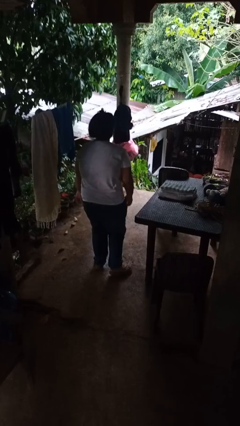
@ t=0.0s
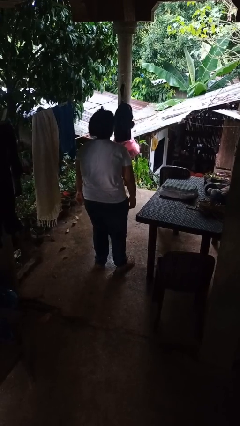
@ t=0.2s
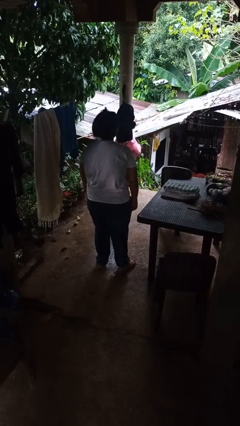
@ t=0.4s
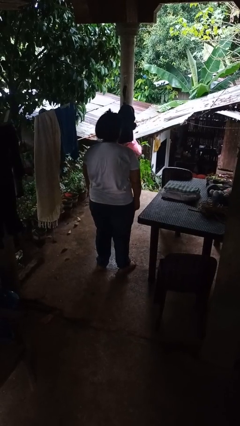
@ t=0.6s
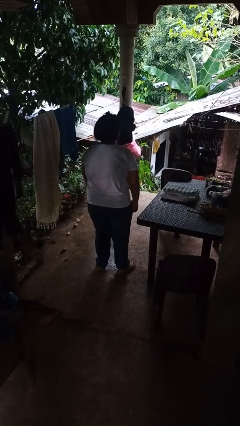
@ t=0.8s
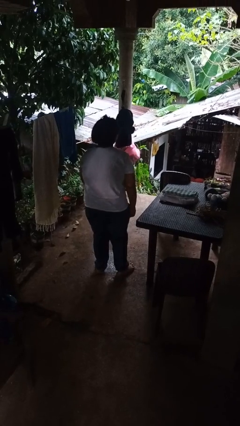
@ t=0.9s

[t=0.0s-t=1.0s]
person bumps into table

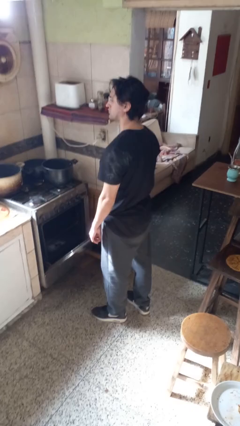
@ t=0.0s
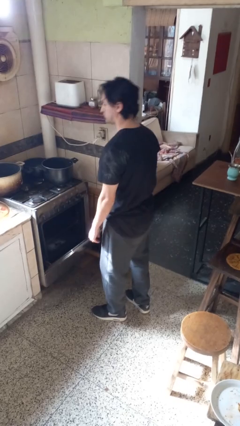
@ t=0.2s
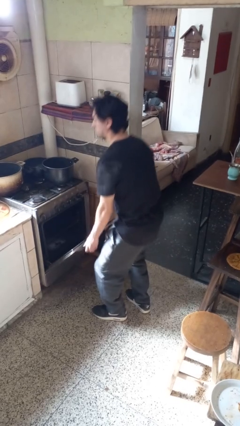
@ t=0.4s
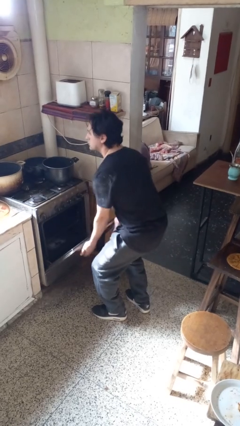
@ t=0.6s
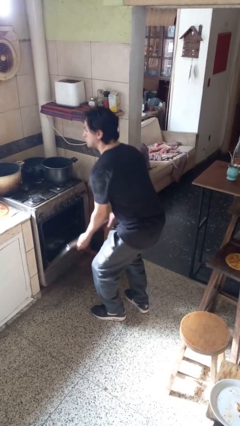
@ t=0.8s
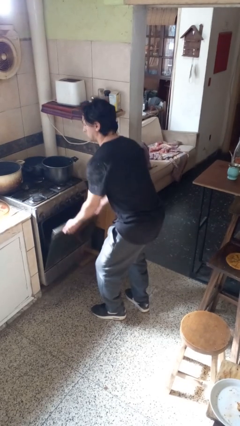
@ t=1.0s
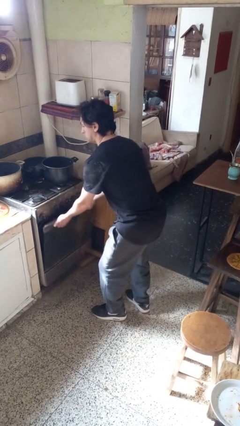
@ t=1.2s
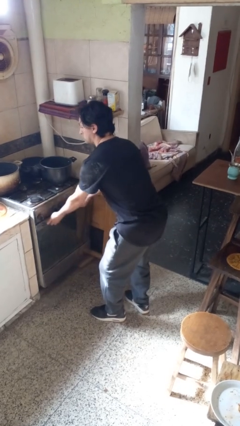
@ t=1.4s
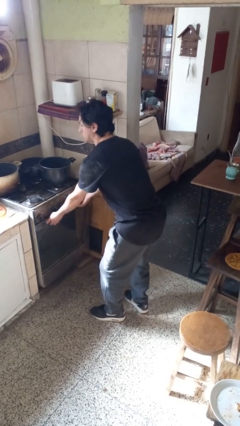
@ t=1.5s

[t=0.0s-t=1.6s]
person closes oven door

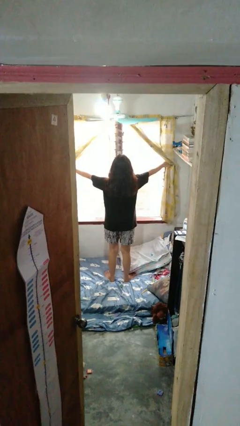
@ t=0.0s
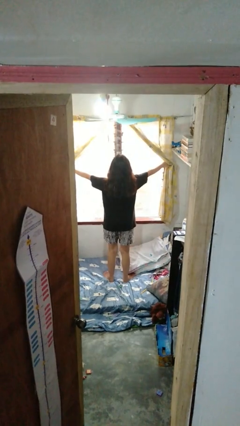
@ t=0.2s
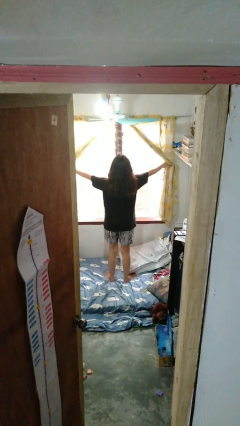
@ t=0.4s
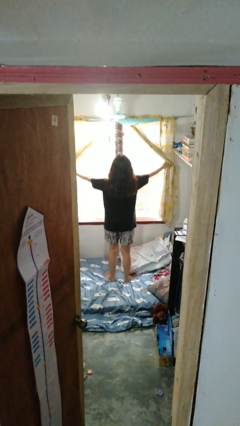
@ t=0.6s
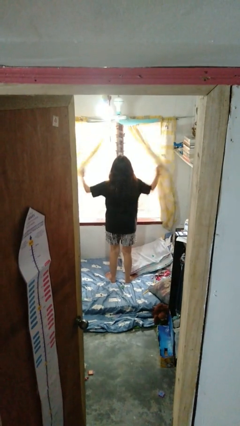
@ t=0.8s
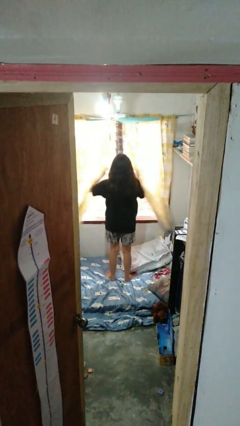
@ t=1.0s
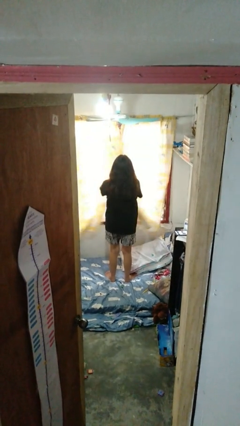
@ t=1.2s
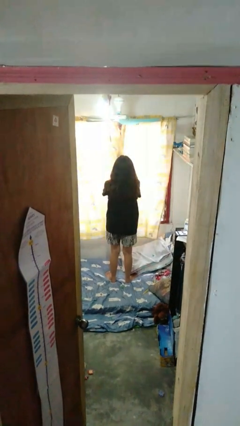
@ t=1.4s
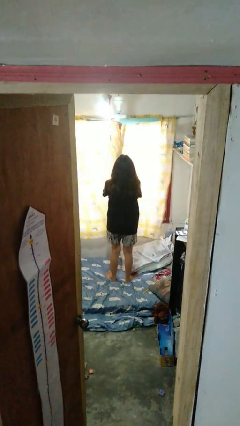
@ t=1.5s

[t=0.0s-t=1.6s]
person closes curtains

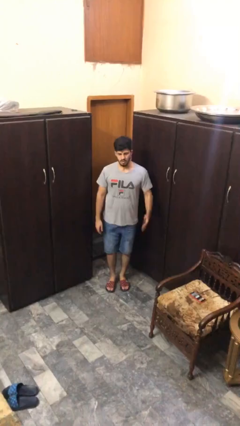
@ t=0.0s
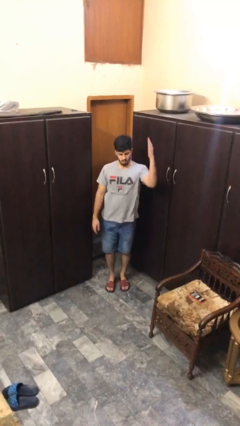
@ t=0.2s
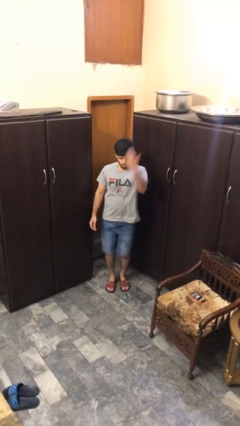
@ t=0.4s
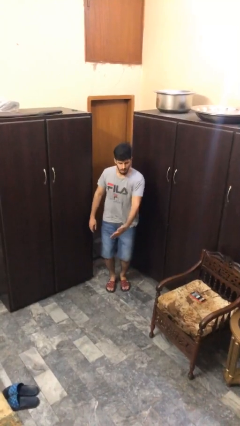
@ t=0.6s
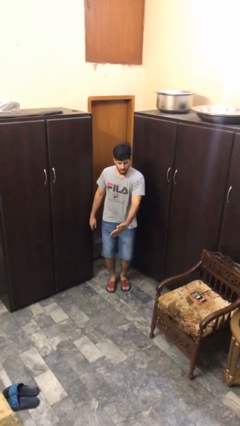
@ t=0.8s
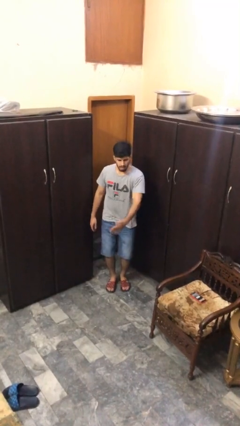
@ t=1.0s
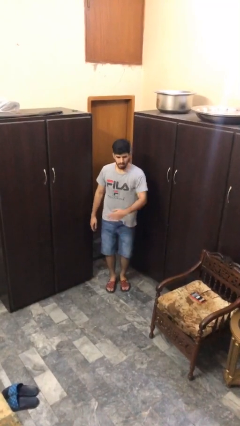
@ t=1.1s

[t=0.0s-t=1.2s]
person karate chop

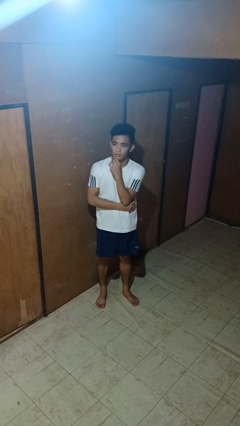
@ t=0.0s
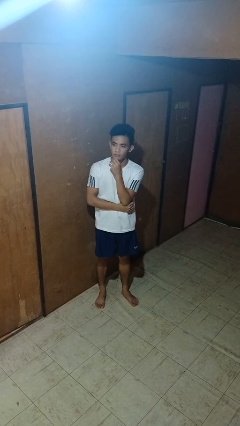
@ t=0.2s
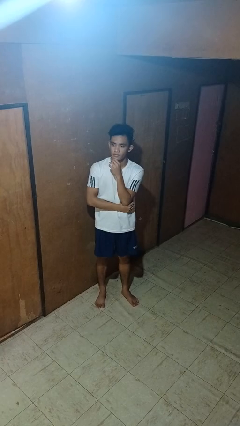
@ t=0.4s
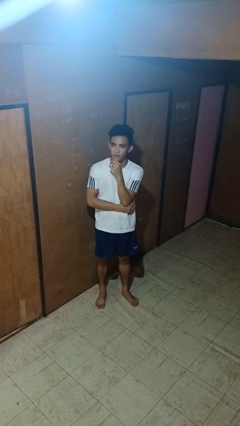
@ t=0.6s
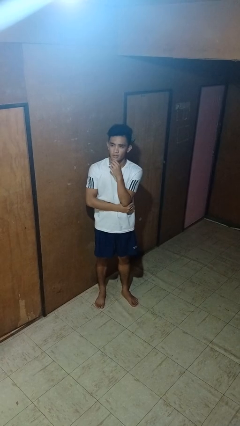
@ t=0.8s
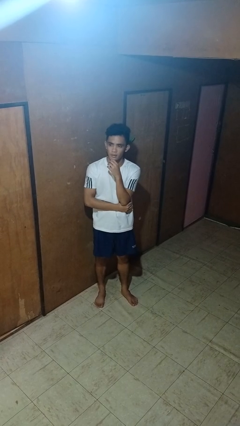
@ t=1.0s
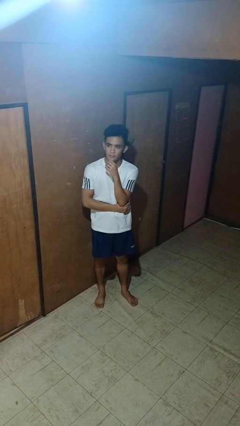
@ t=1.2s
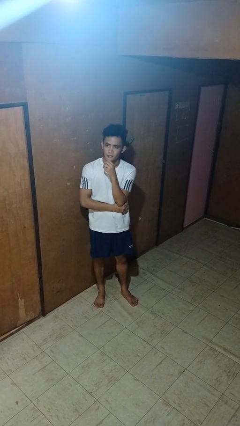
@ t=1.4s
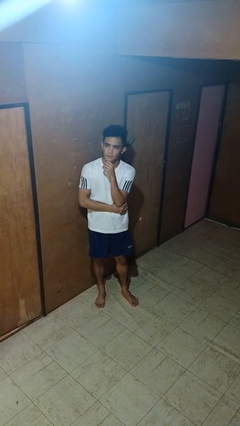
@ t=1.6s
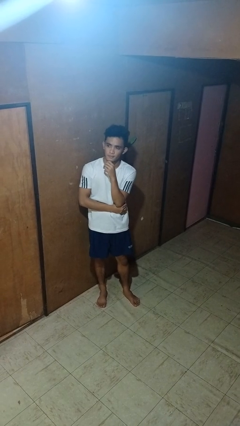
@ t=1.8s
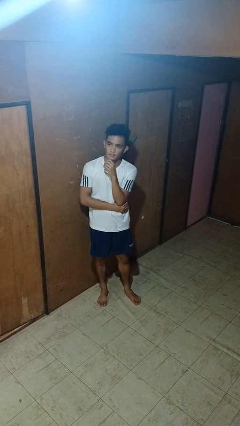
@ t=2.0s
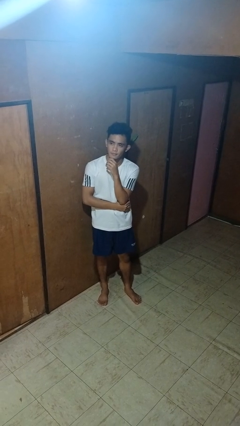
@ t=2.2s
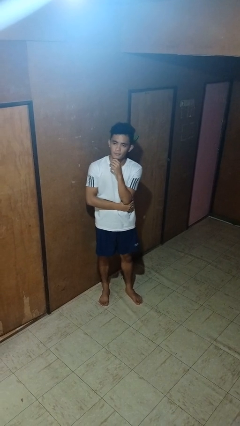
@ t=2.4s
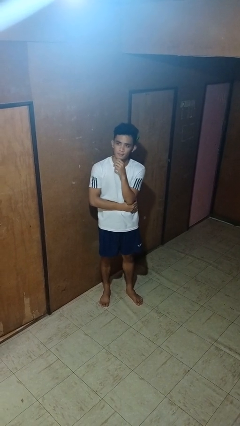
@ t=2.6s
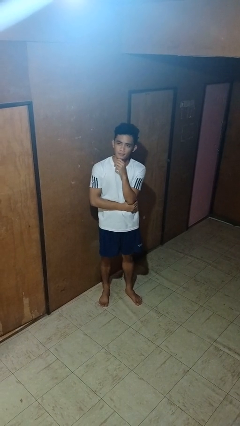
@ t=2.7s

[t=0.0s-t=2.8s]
person strokes chin

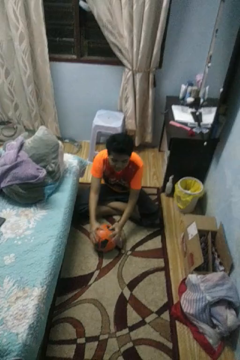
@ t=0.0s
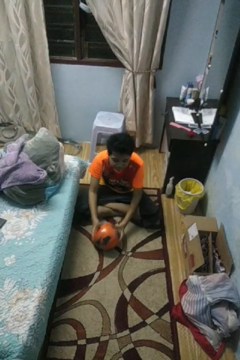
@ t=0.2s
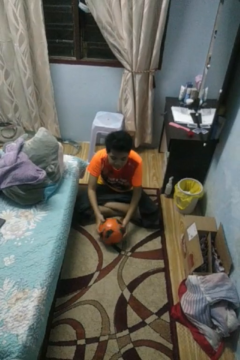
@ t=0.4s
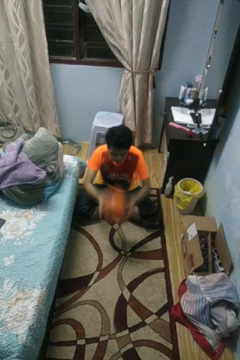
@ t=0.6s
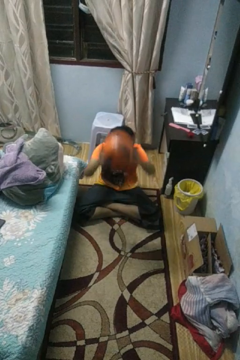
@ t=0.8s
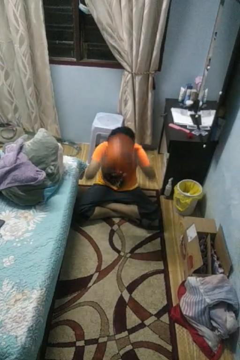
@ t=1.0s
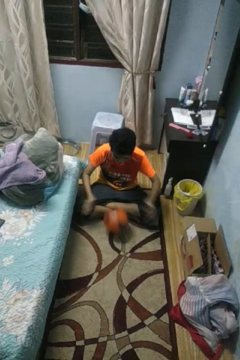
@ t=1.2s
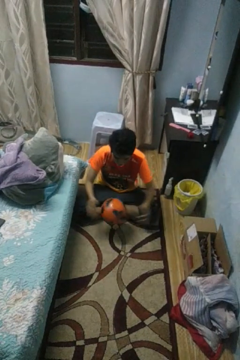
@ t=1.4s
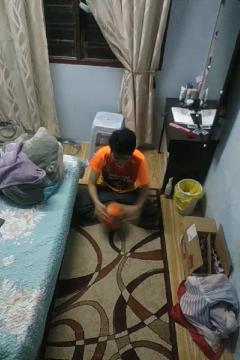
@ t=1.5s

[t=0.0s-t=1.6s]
person bounces ball on floor

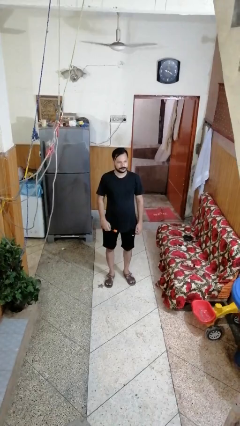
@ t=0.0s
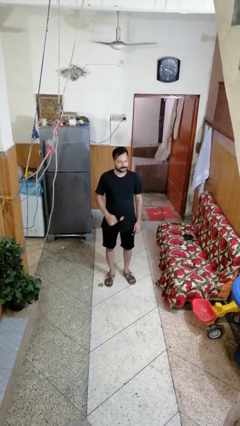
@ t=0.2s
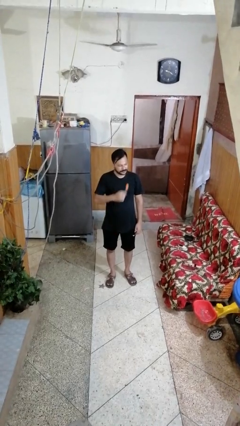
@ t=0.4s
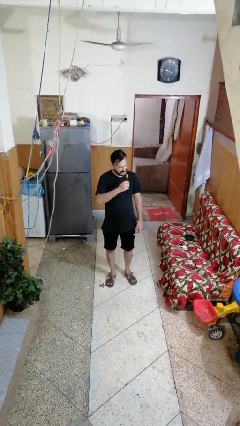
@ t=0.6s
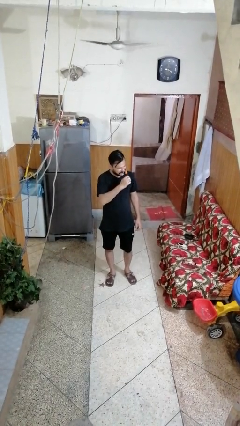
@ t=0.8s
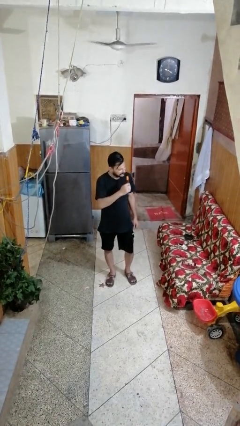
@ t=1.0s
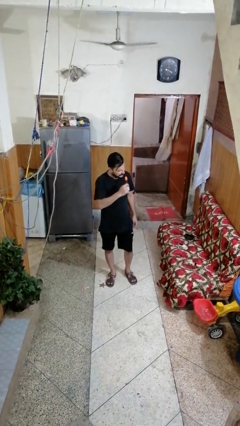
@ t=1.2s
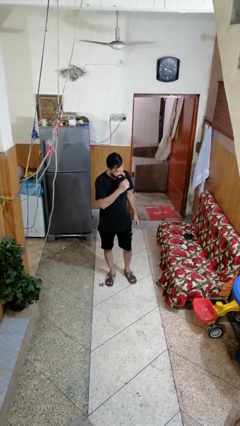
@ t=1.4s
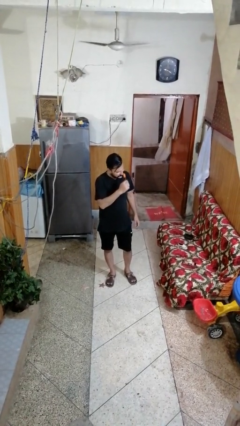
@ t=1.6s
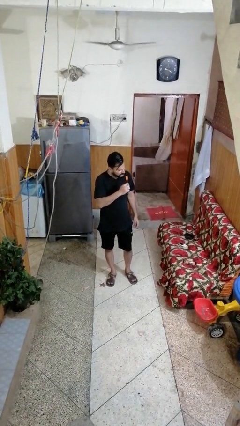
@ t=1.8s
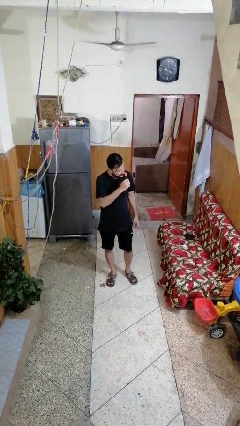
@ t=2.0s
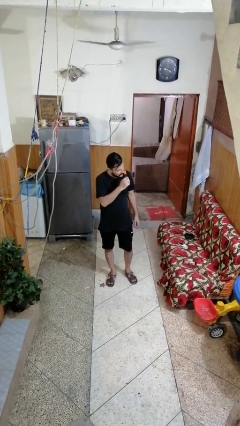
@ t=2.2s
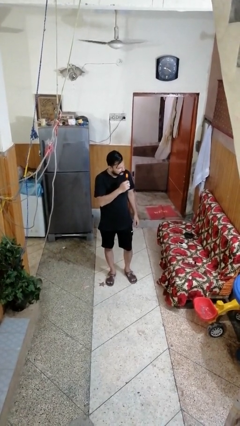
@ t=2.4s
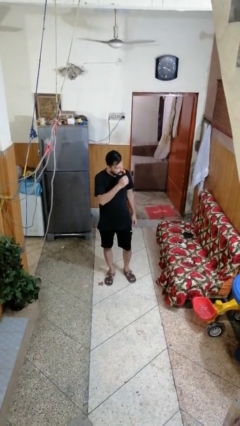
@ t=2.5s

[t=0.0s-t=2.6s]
person brushes teeth

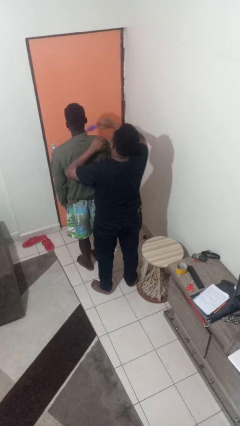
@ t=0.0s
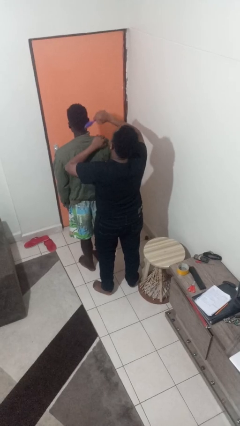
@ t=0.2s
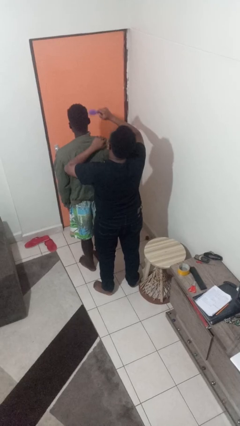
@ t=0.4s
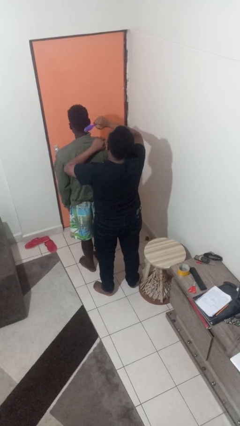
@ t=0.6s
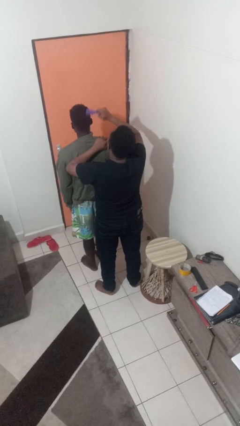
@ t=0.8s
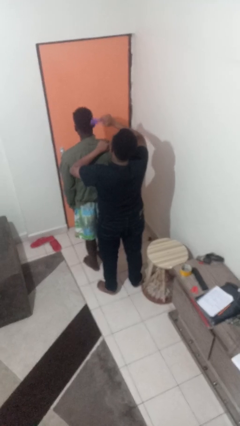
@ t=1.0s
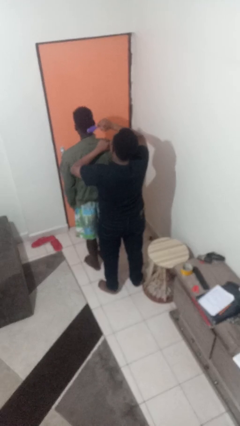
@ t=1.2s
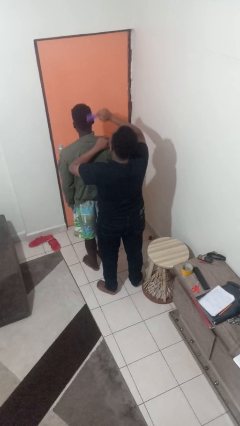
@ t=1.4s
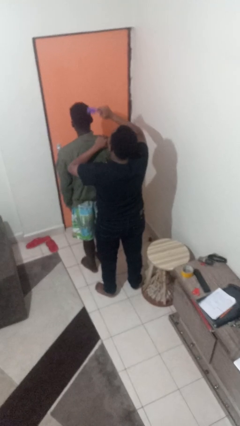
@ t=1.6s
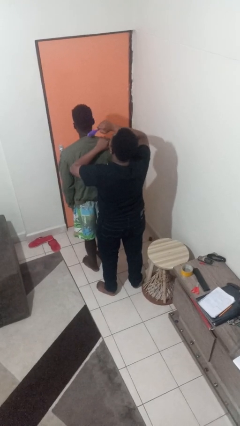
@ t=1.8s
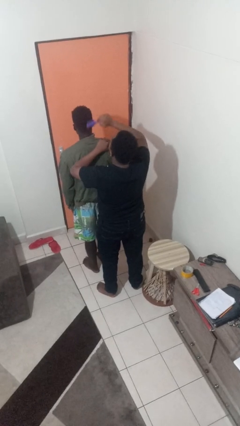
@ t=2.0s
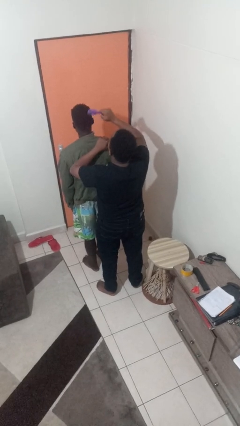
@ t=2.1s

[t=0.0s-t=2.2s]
person brushes hair of person

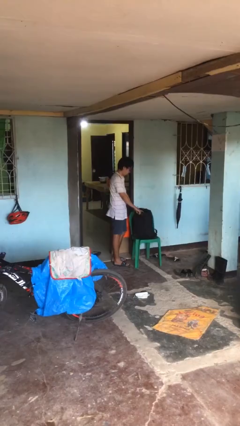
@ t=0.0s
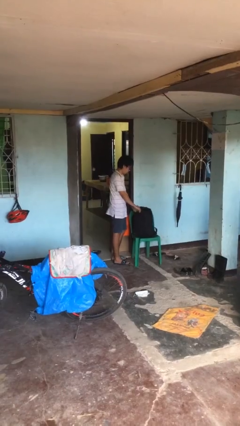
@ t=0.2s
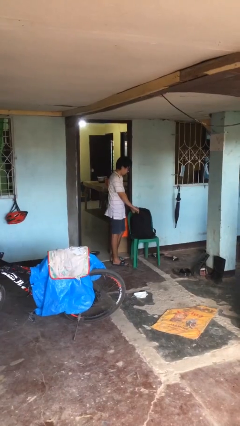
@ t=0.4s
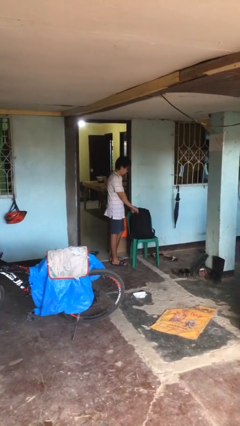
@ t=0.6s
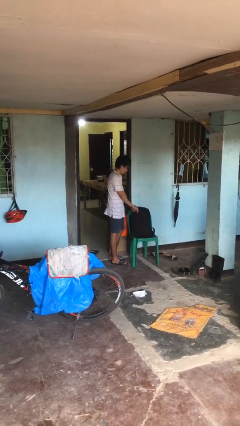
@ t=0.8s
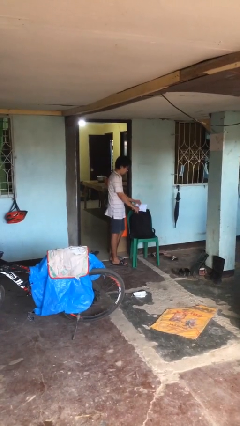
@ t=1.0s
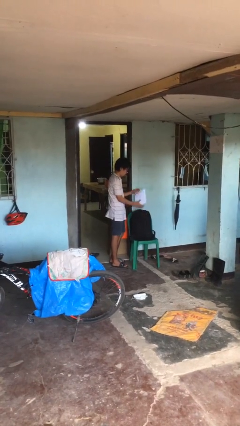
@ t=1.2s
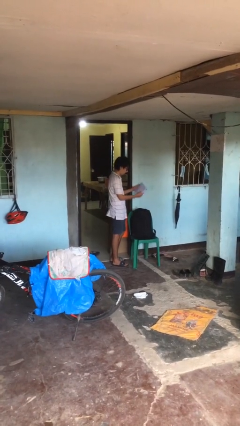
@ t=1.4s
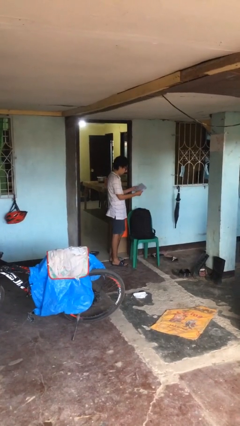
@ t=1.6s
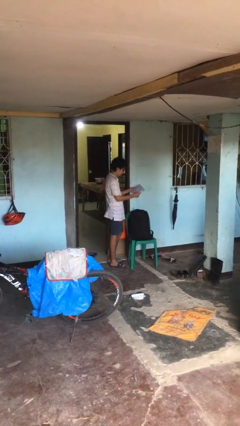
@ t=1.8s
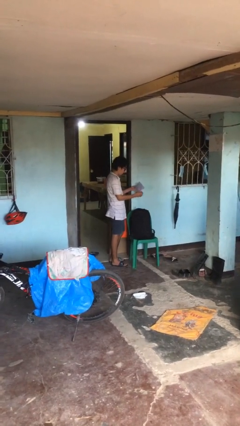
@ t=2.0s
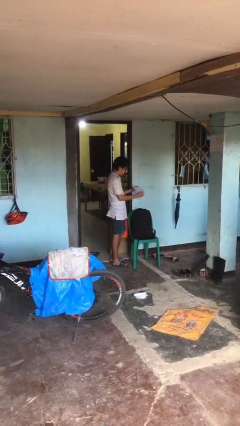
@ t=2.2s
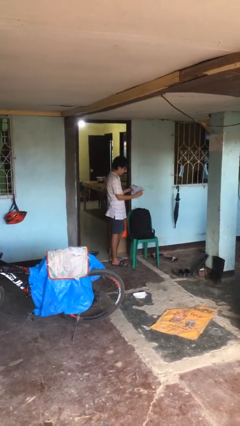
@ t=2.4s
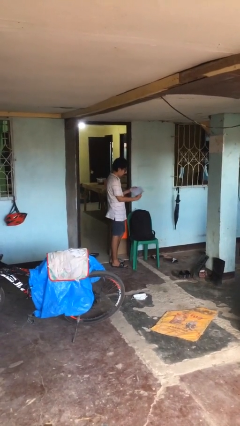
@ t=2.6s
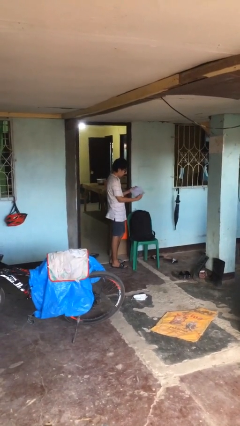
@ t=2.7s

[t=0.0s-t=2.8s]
person takes object from backpack
